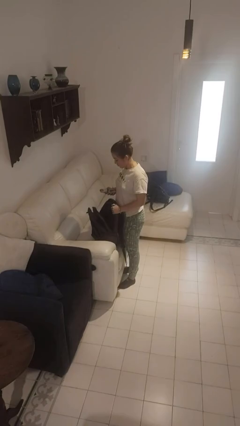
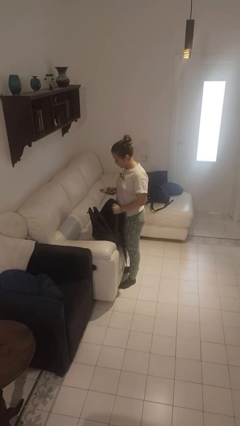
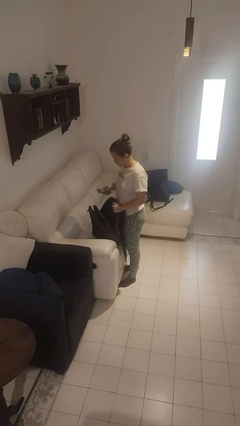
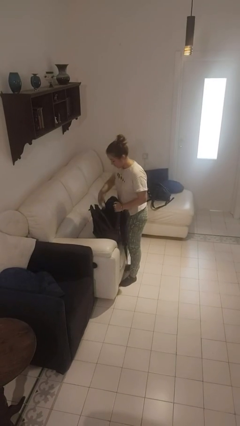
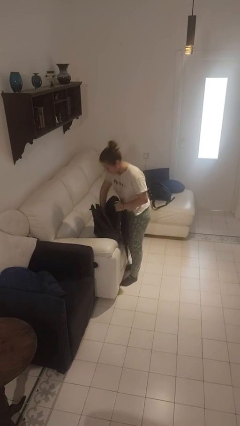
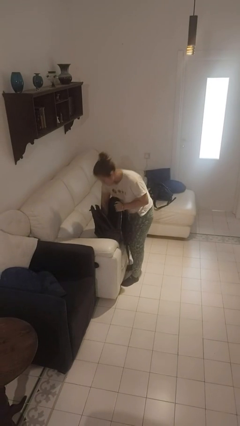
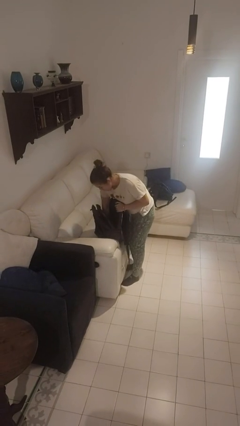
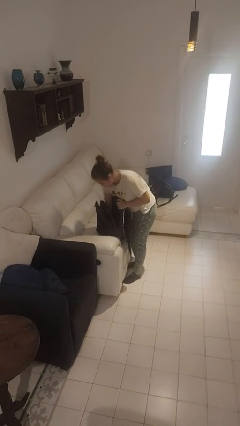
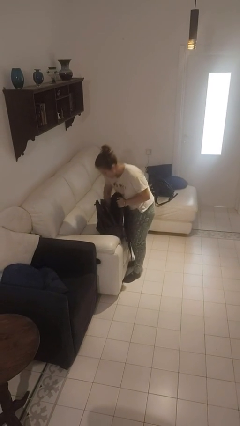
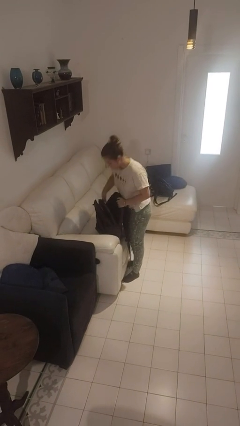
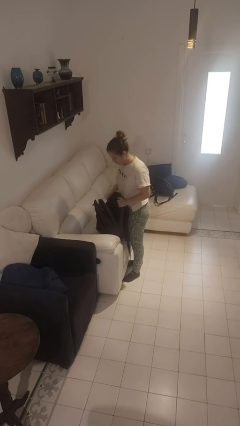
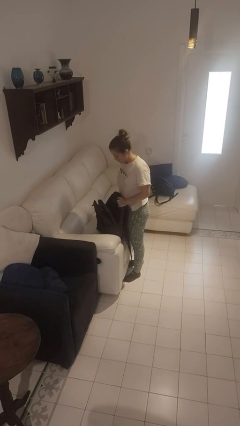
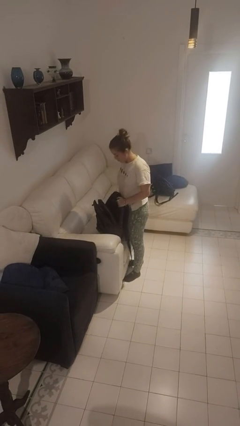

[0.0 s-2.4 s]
person puts object into backpack

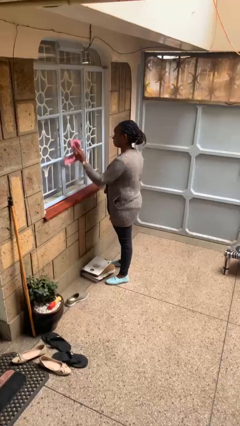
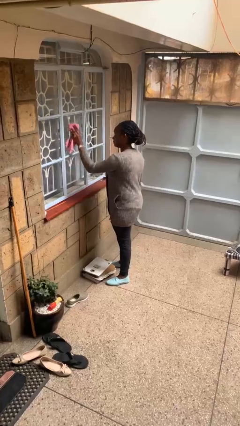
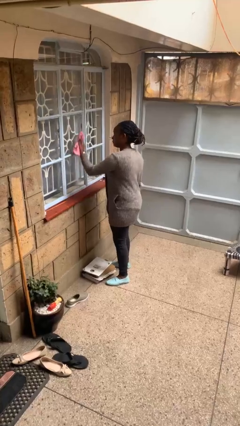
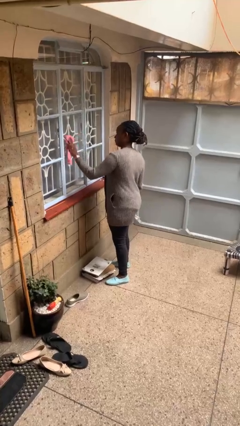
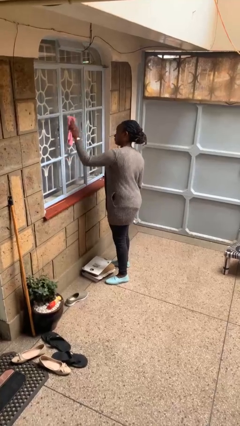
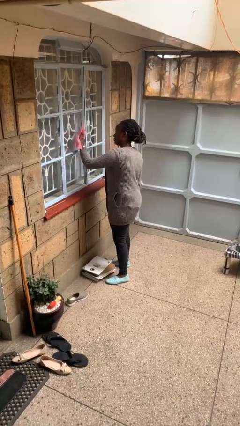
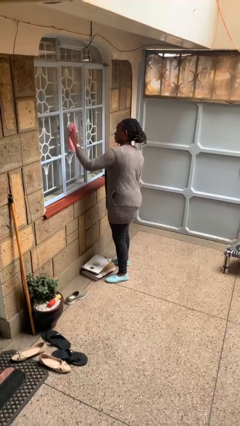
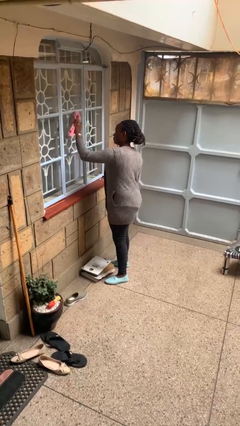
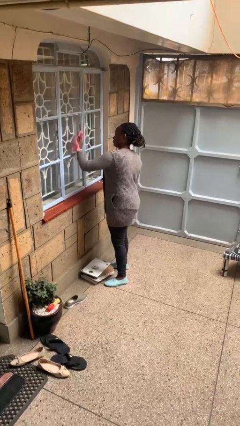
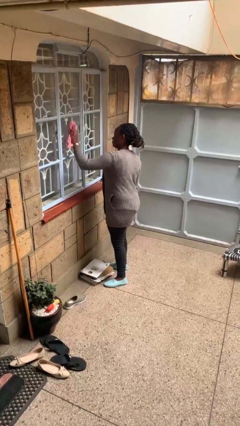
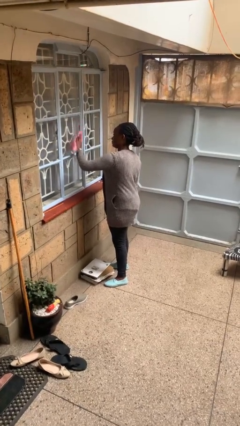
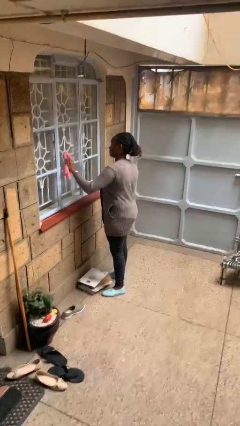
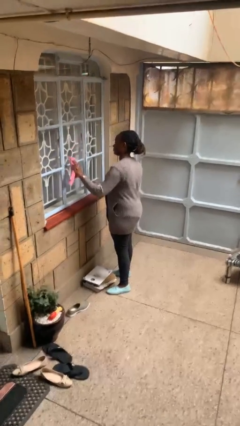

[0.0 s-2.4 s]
person washes window

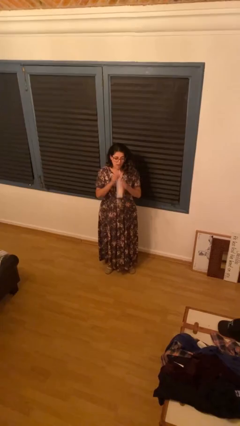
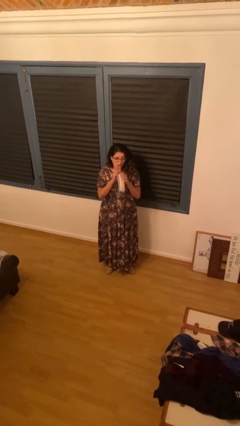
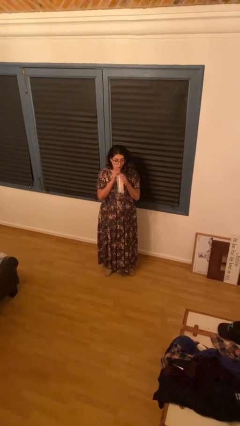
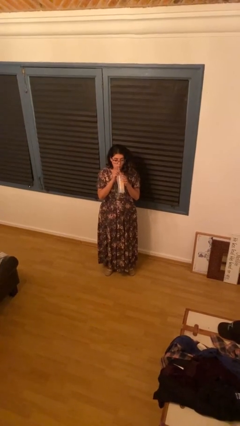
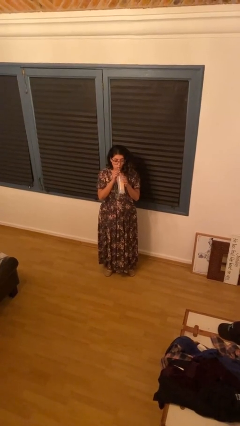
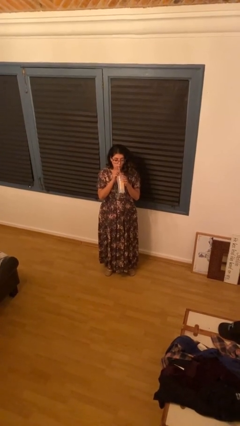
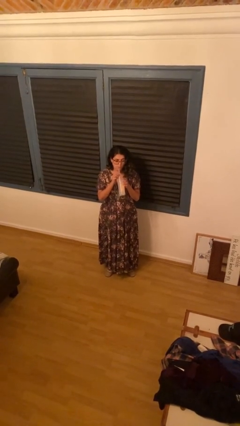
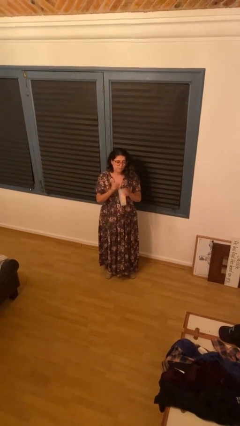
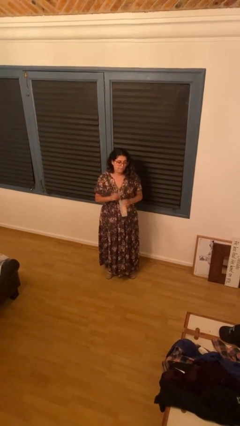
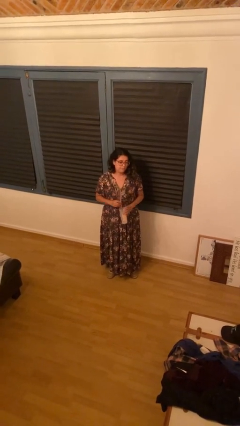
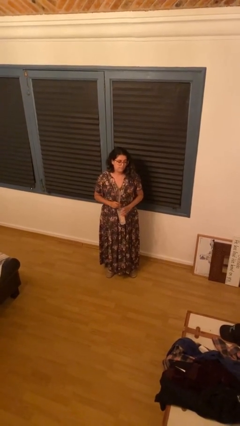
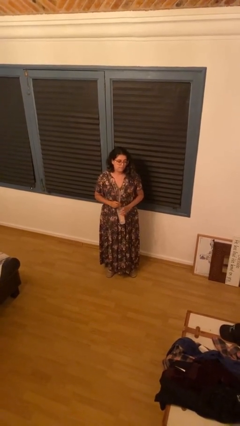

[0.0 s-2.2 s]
person drinks from straw

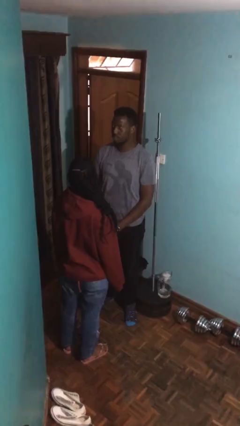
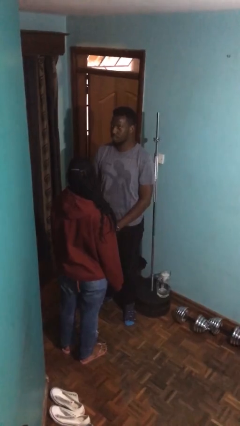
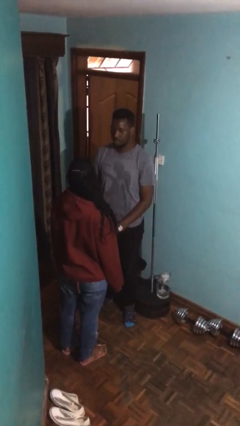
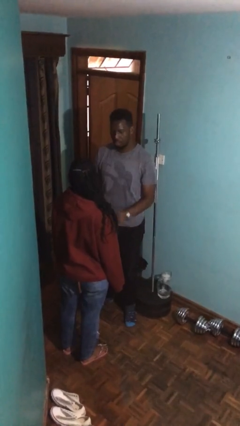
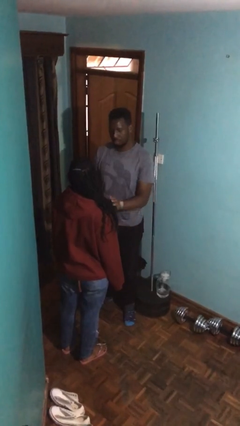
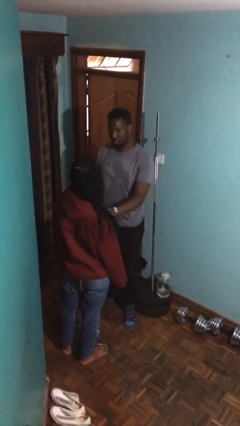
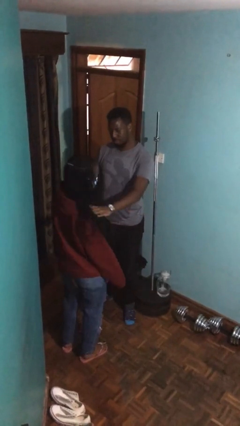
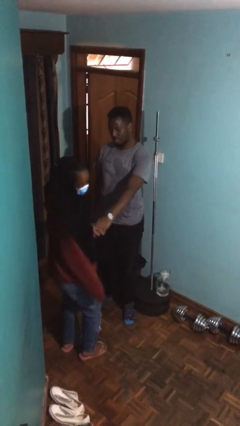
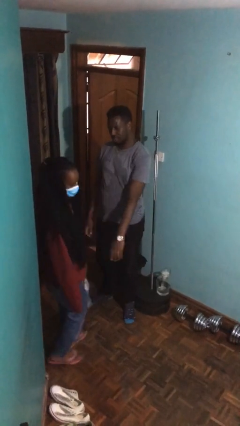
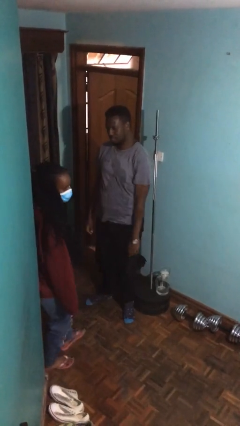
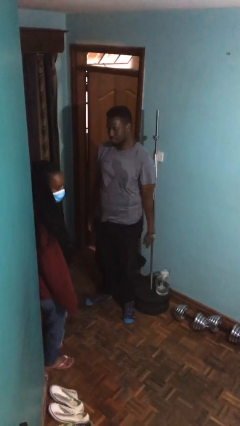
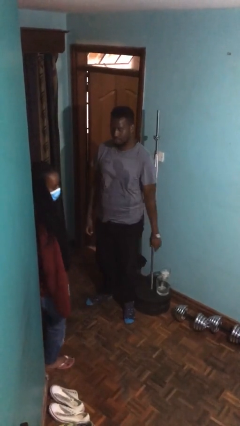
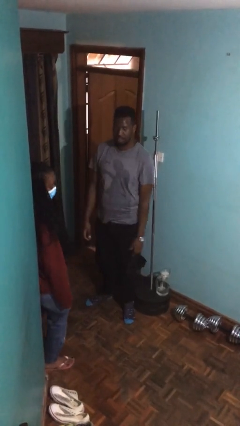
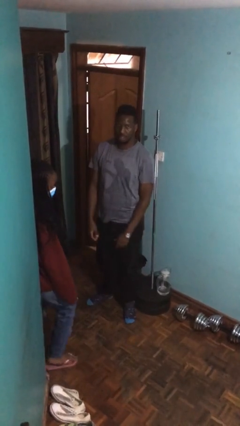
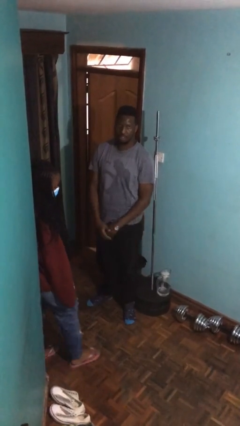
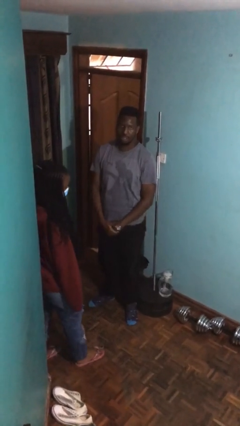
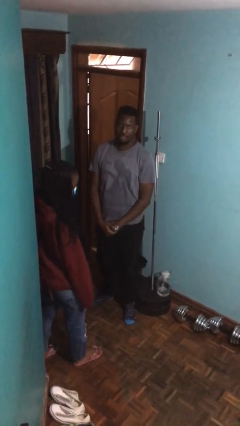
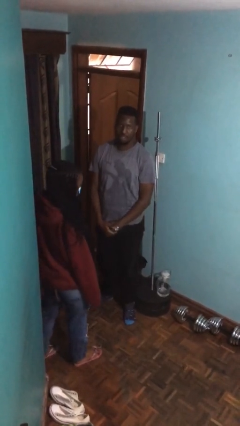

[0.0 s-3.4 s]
person shoves person

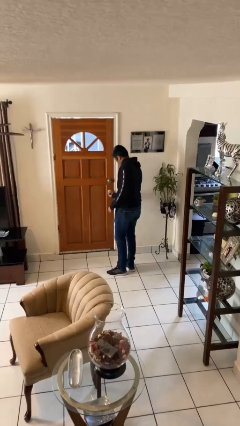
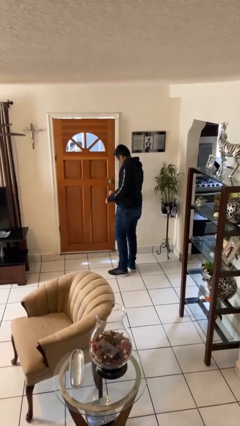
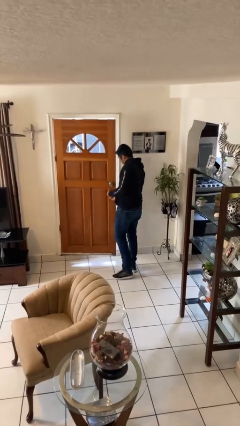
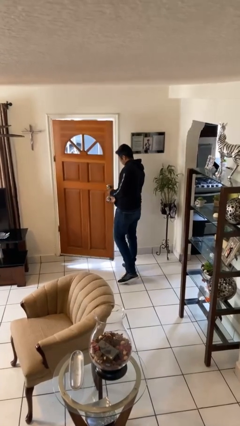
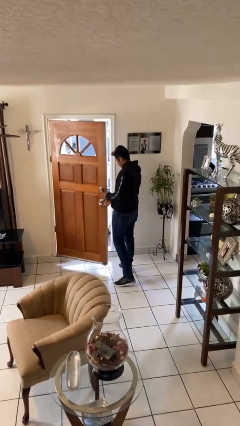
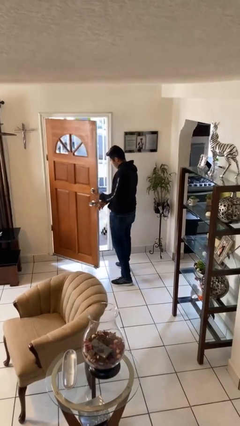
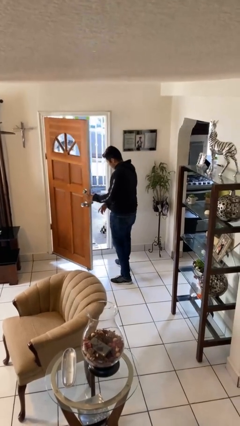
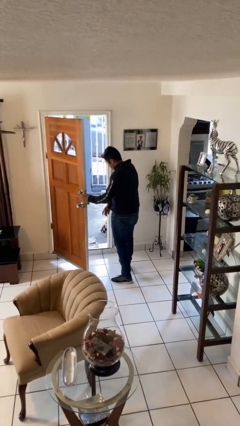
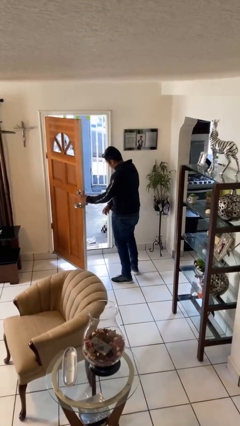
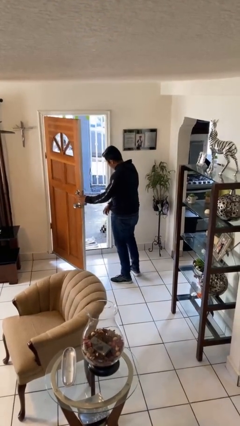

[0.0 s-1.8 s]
person opens facility door

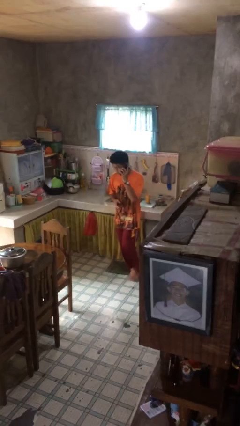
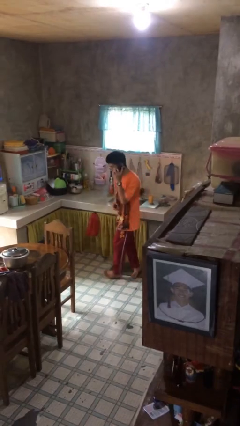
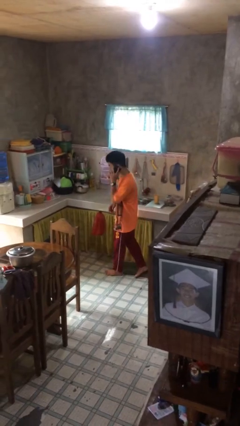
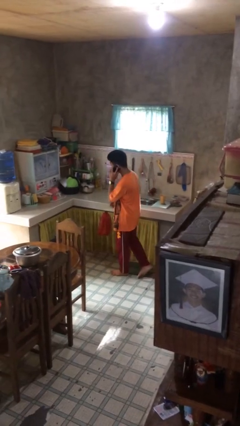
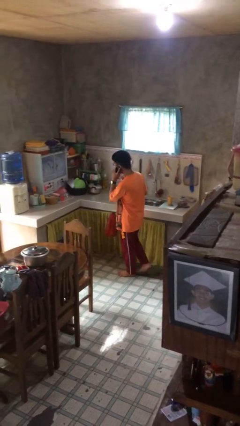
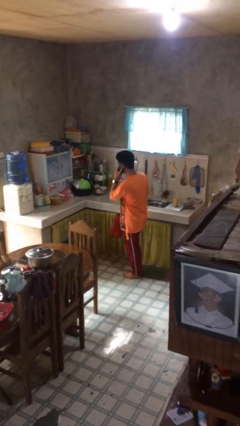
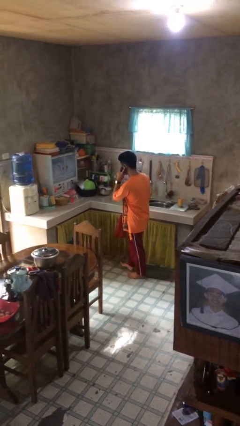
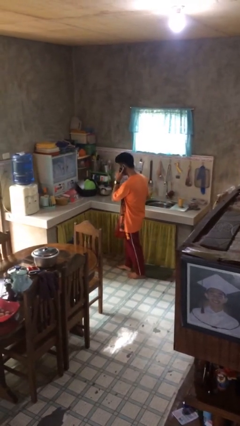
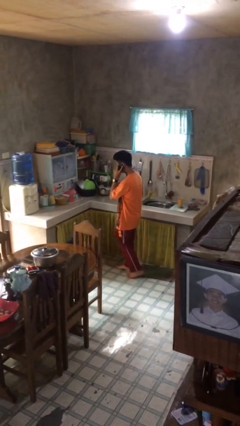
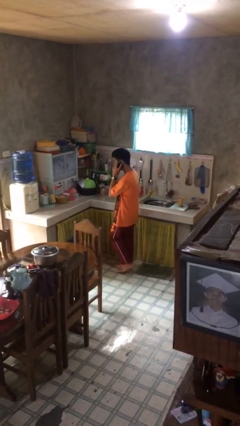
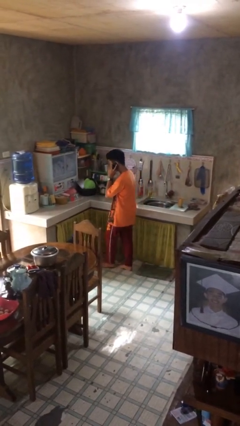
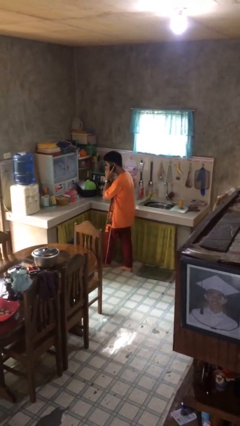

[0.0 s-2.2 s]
person talks on phone

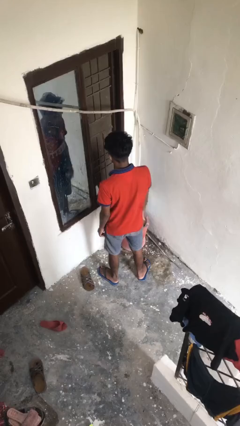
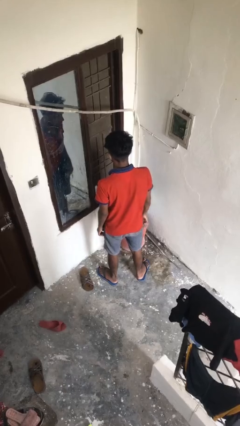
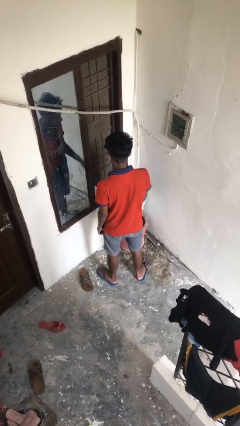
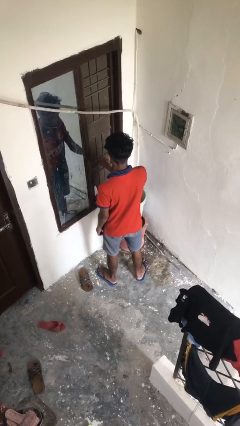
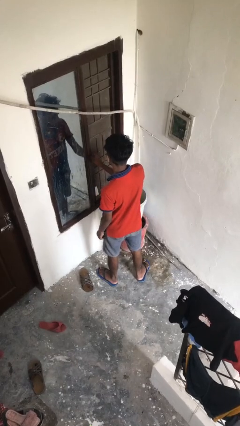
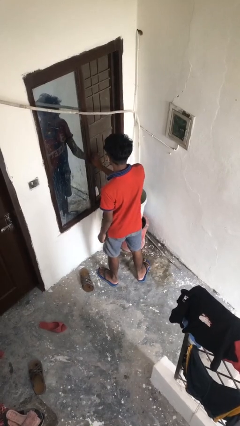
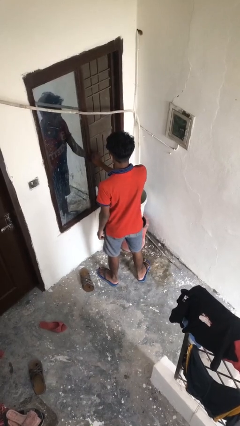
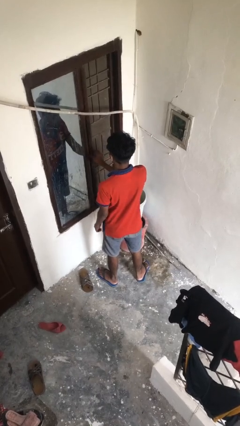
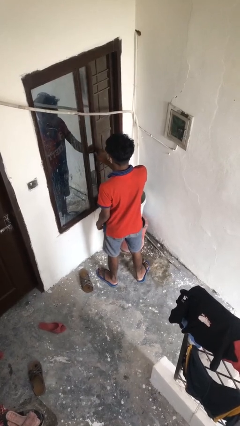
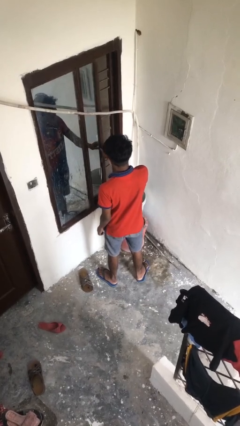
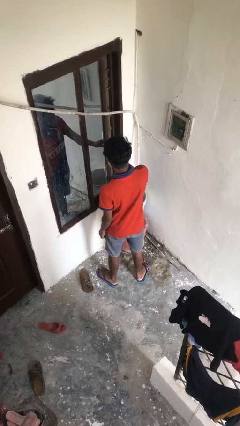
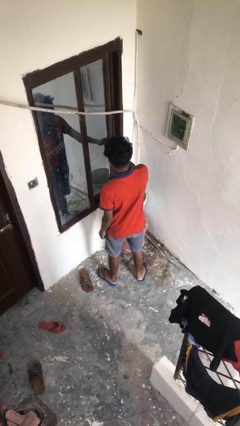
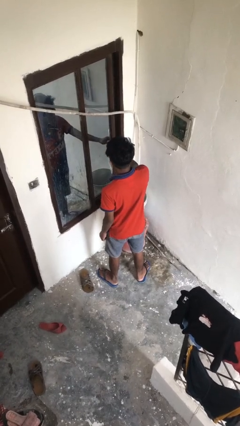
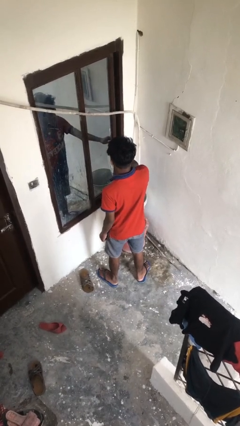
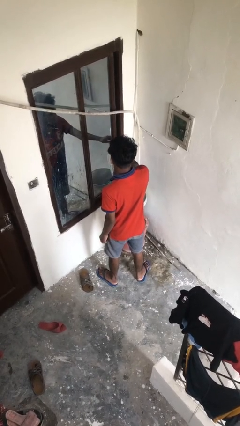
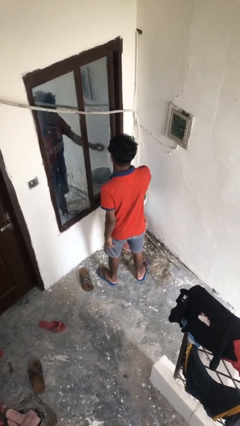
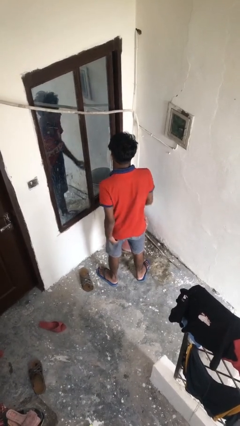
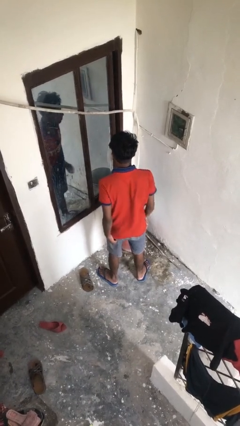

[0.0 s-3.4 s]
person closes home window
